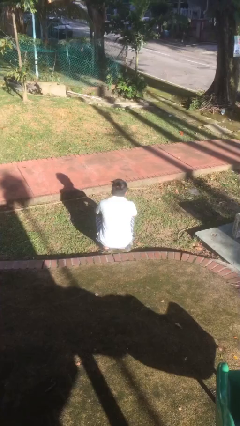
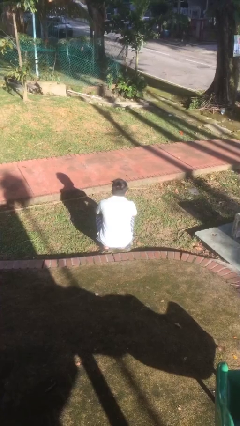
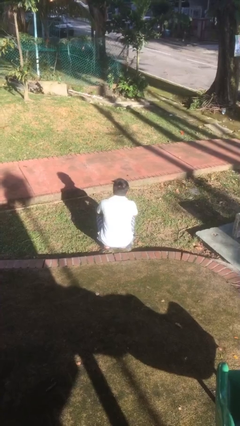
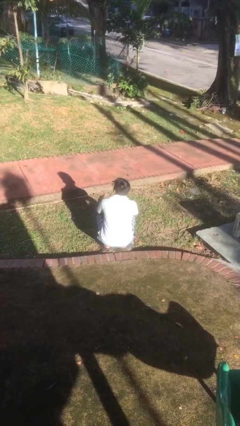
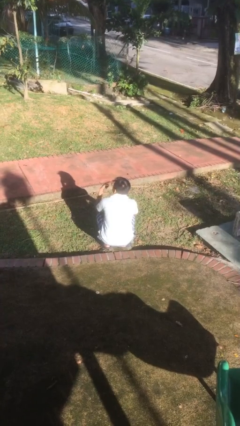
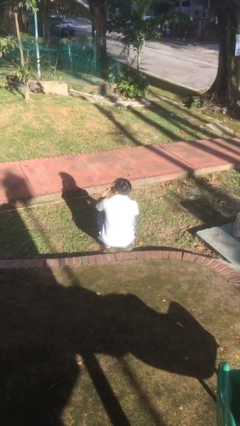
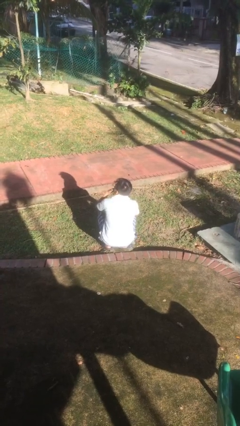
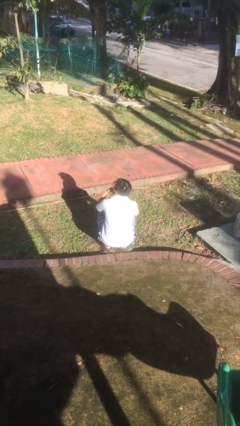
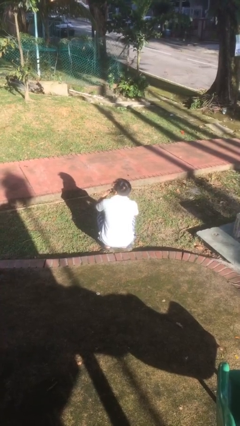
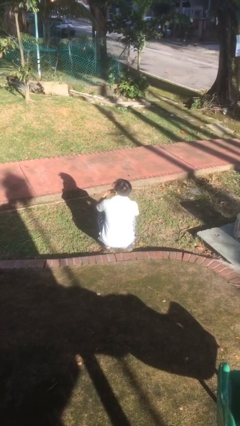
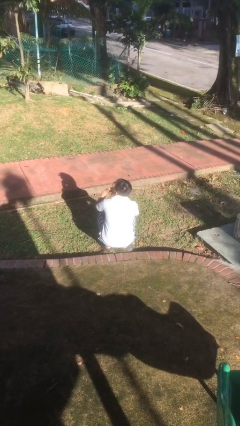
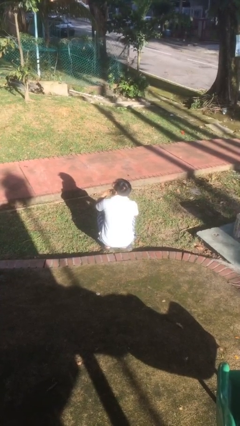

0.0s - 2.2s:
person strokes chin

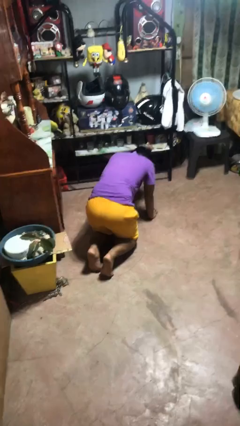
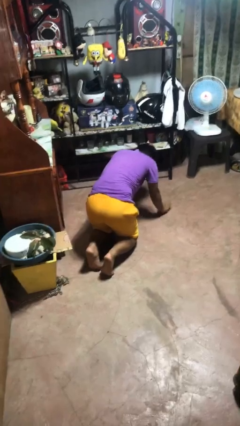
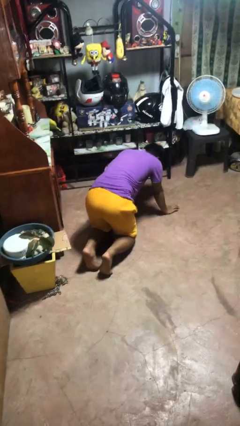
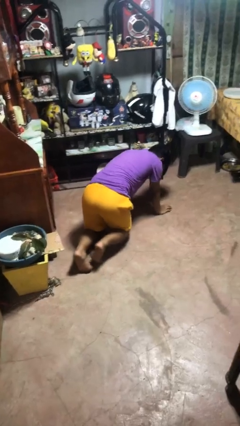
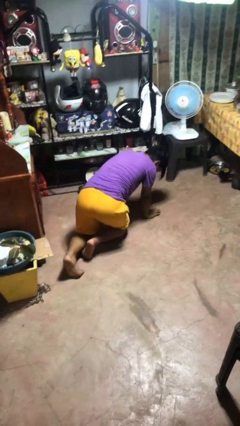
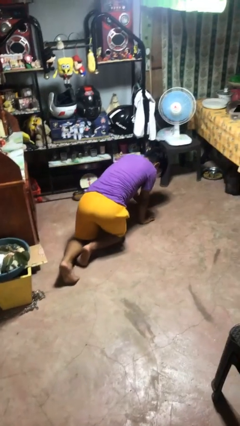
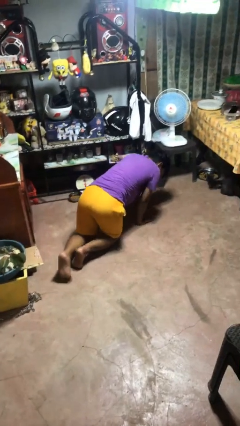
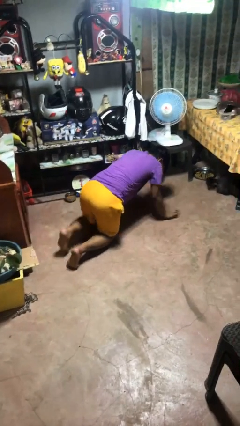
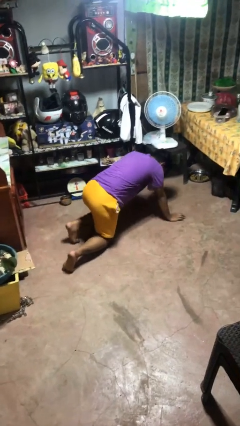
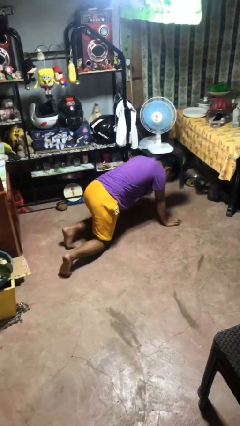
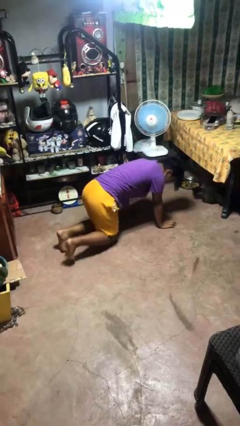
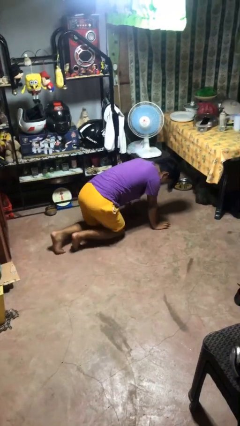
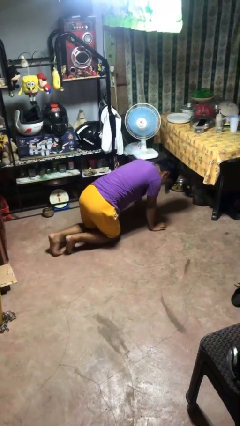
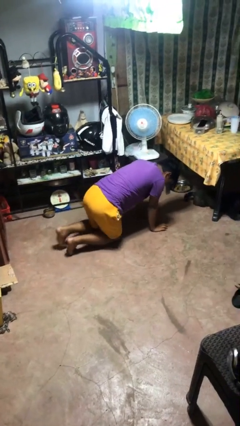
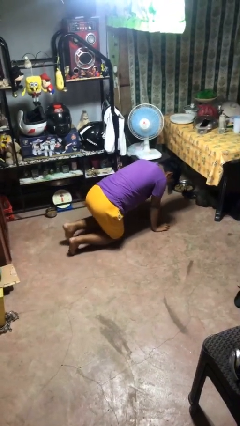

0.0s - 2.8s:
person crawls

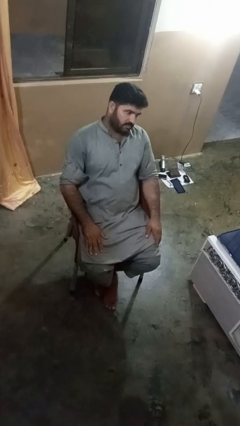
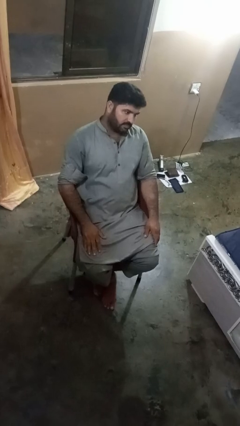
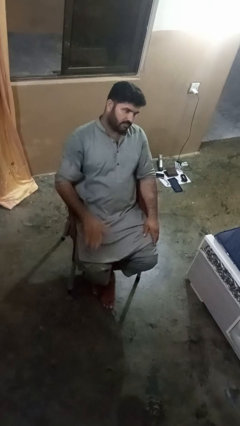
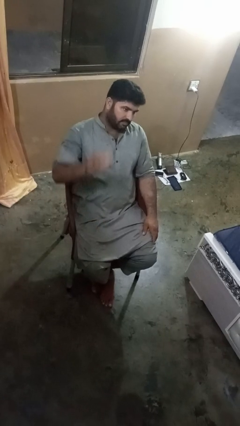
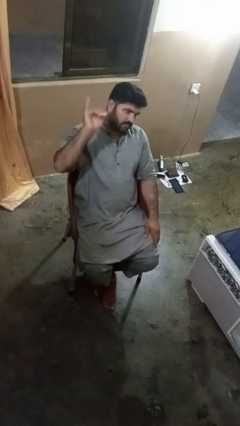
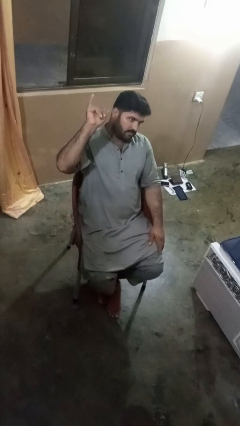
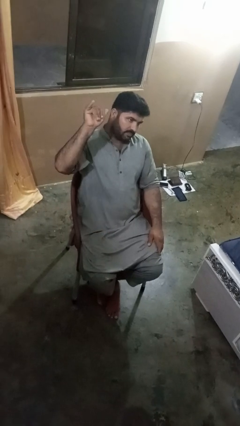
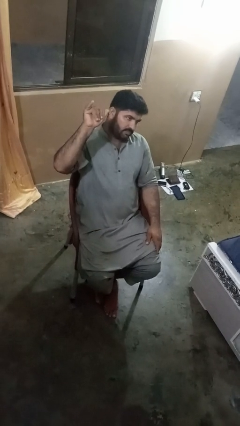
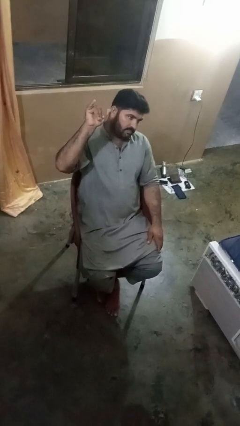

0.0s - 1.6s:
person gestures hang loose

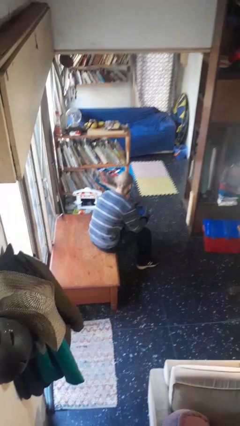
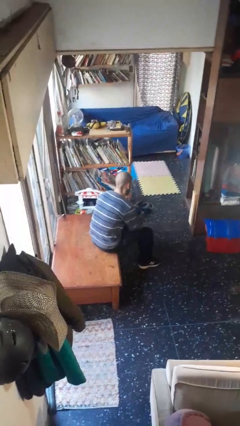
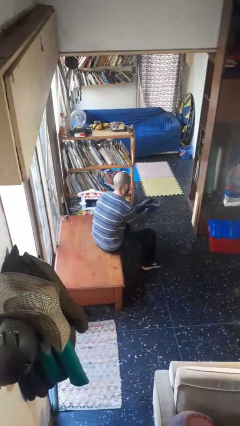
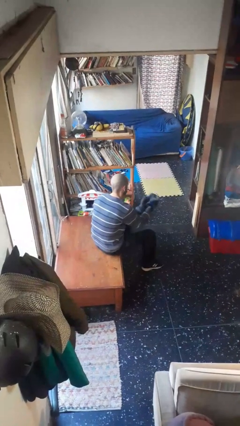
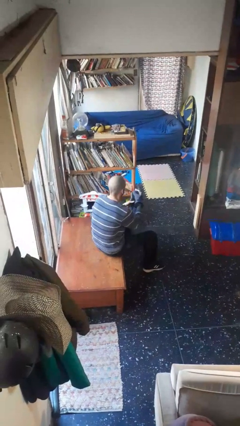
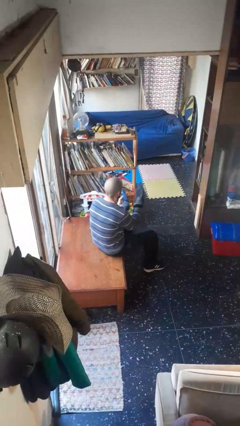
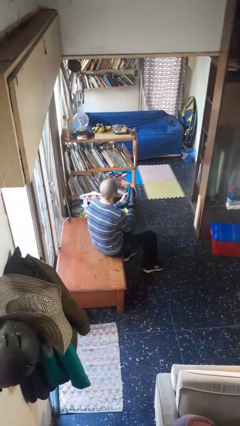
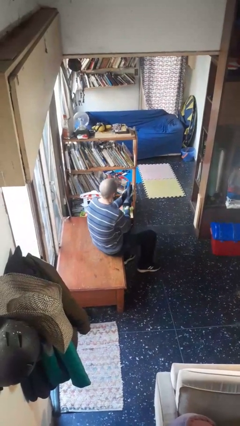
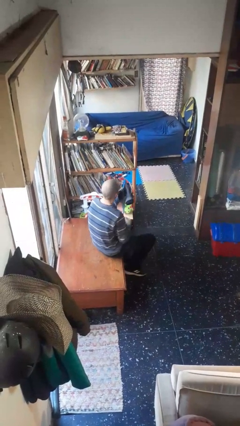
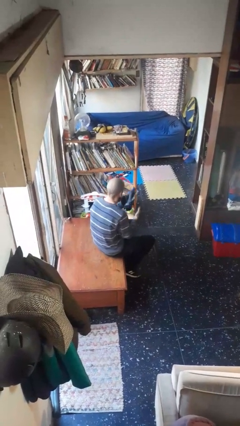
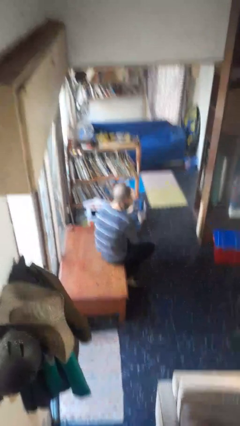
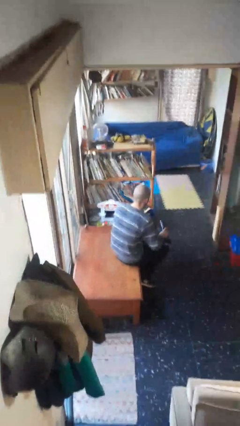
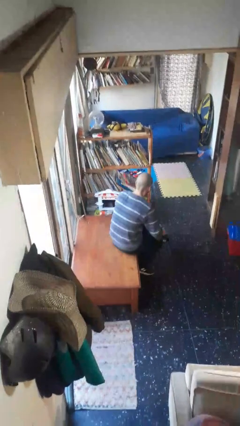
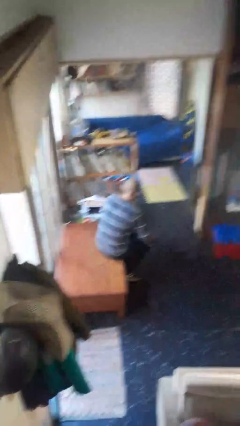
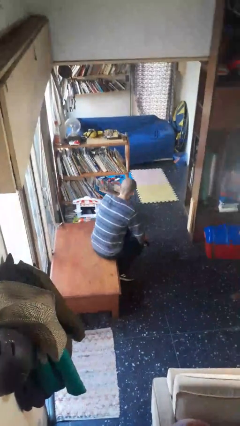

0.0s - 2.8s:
person takes off gloves

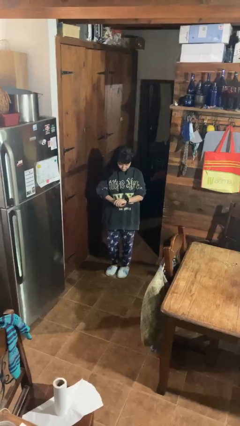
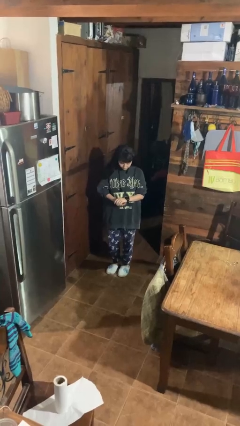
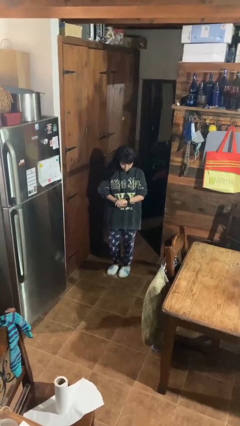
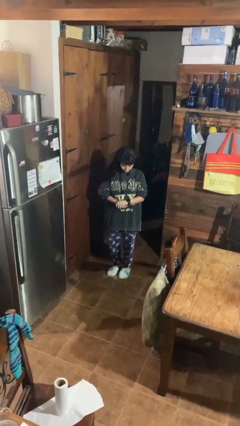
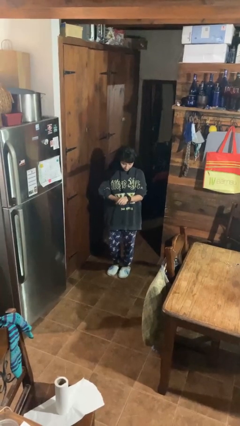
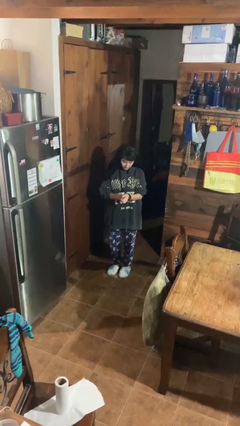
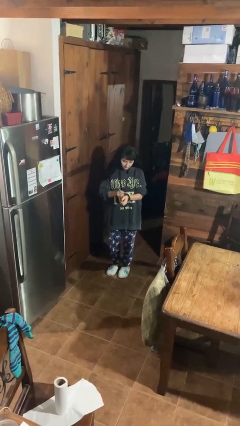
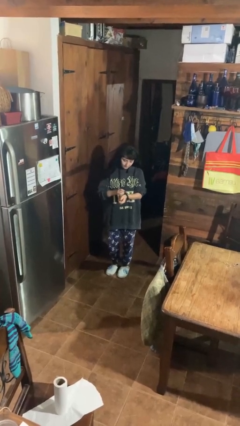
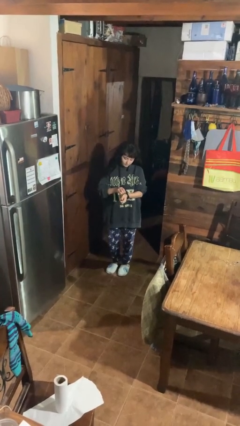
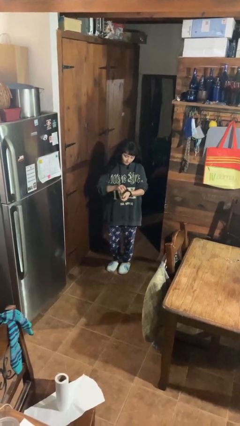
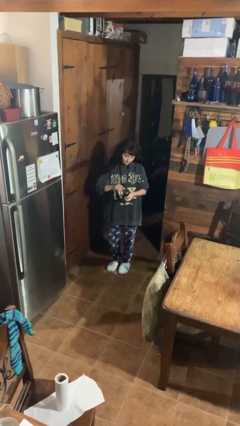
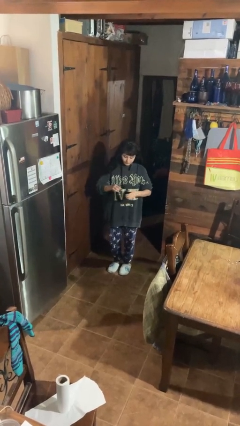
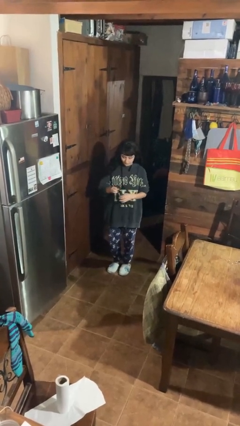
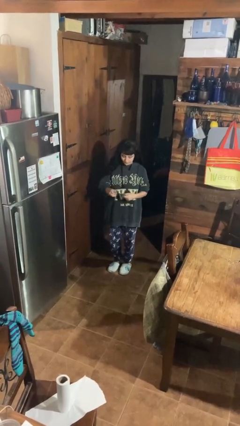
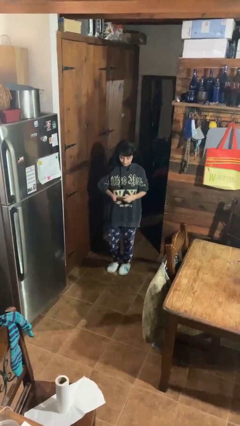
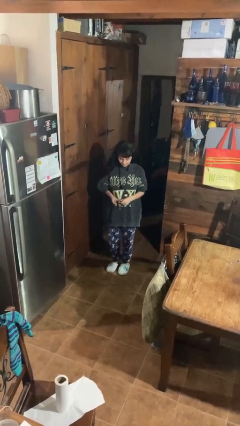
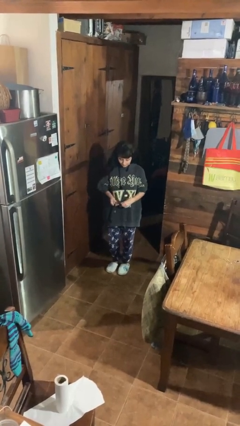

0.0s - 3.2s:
person takes off wristwatch

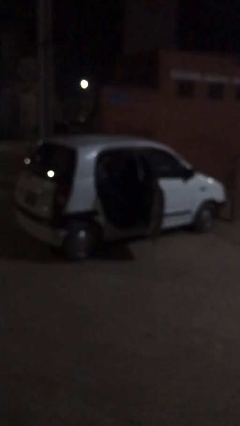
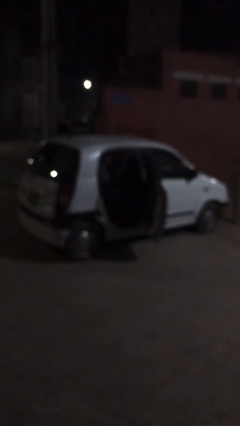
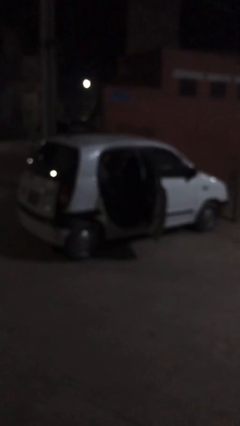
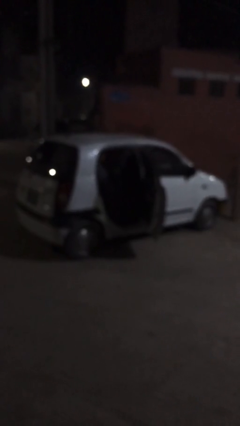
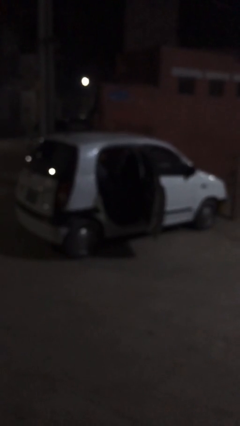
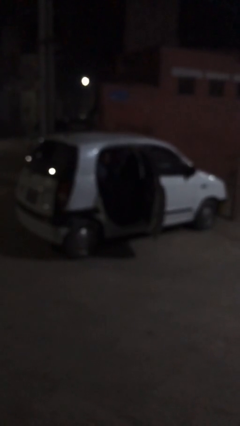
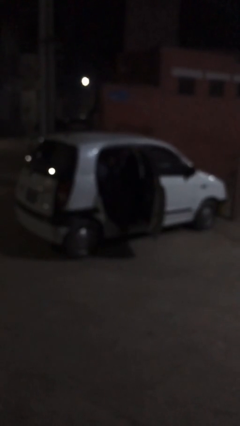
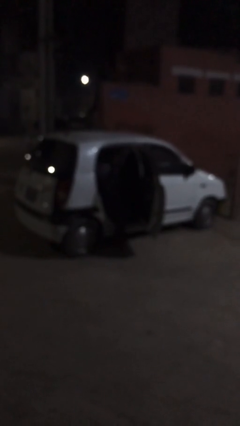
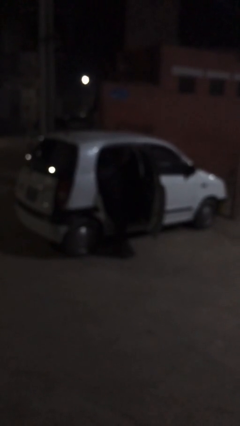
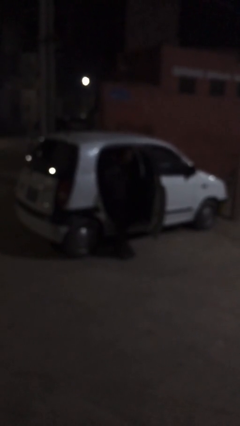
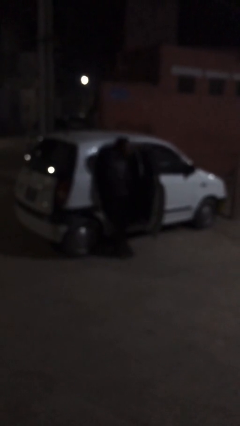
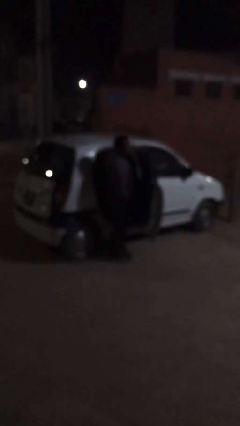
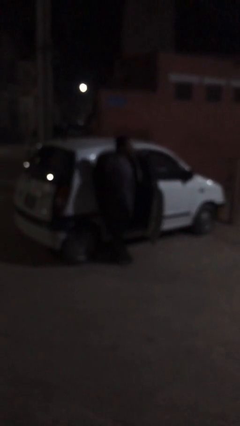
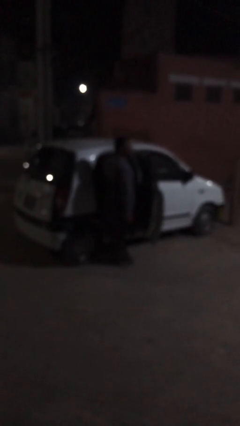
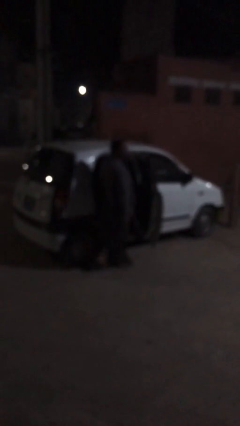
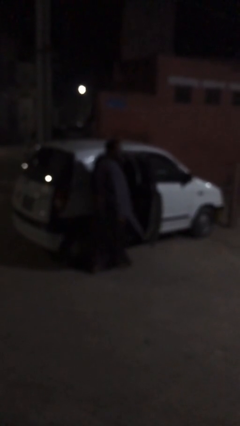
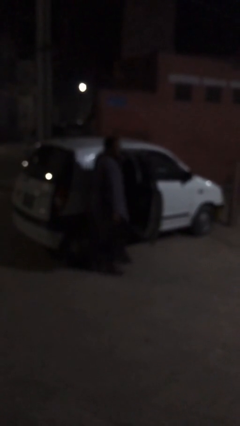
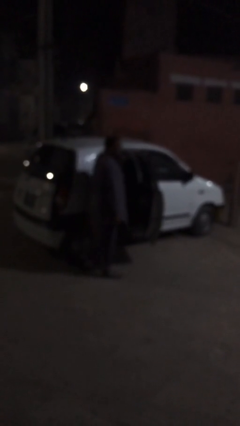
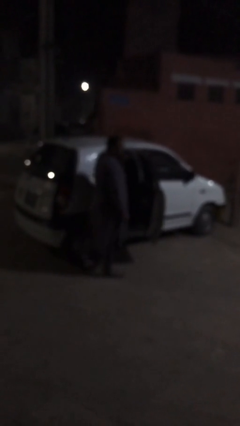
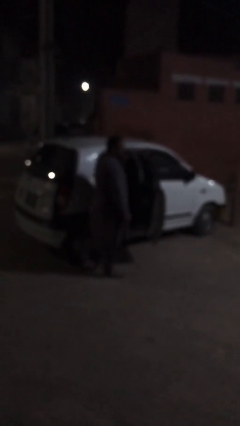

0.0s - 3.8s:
person exits car

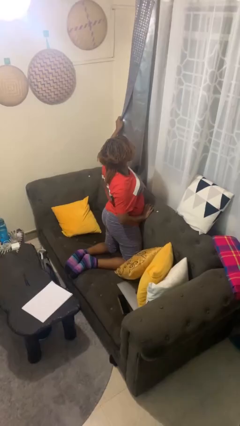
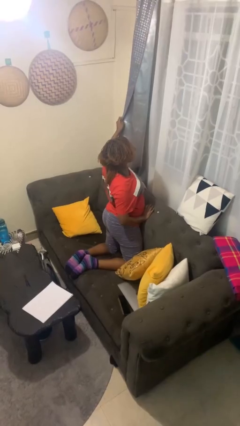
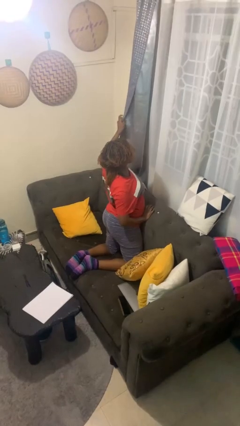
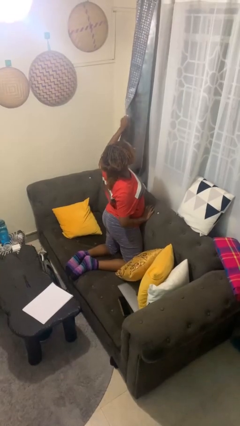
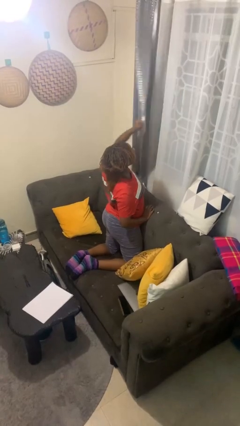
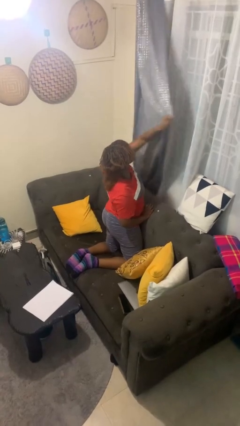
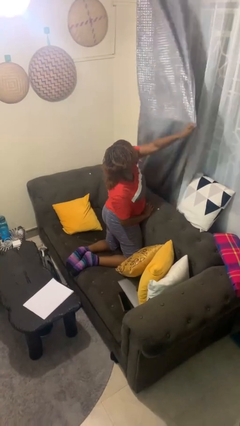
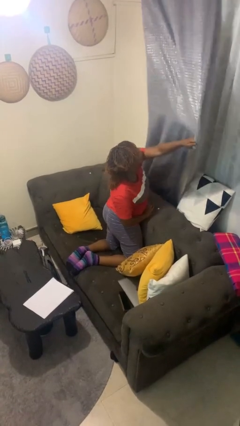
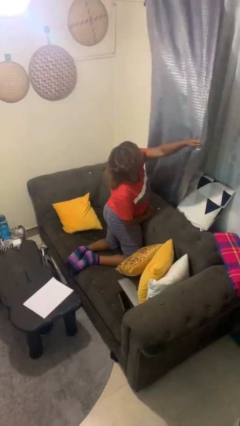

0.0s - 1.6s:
person closes curtains
